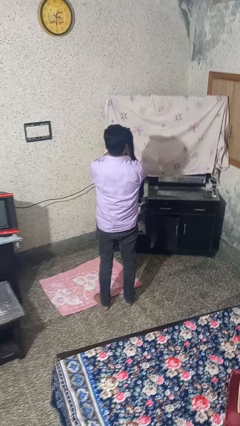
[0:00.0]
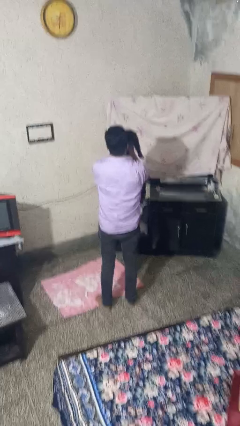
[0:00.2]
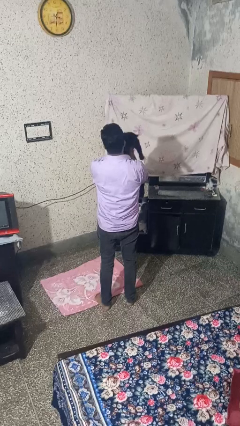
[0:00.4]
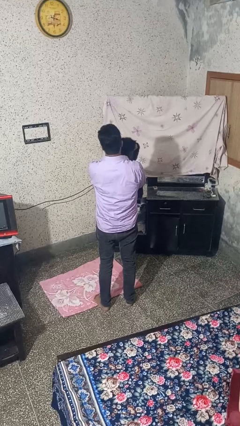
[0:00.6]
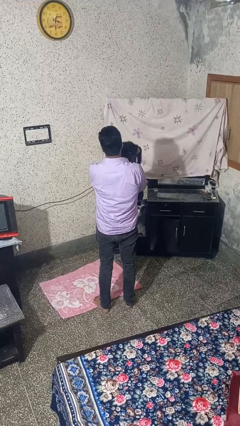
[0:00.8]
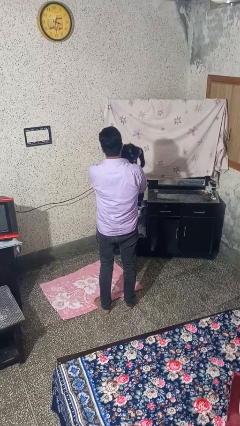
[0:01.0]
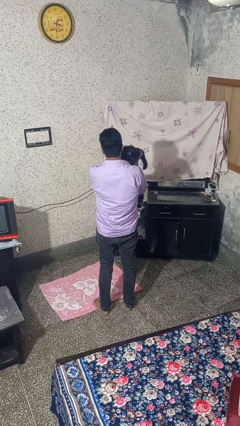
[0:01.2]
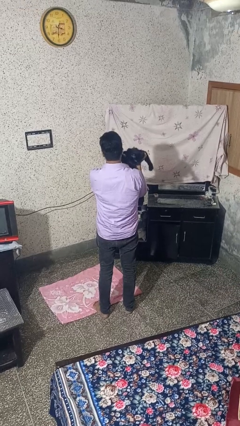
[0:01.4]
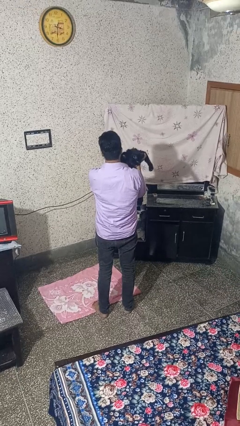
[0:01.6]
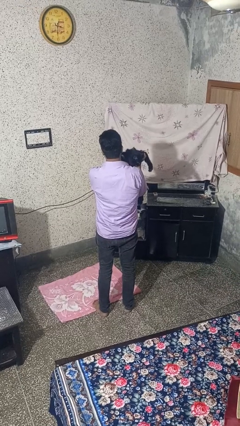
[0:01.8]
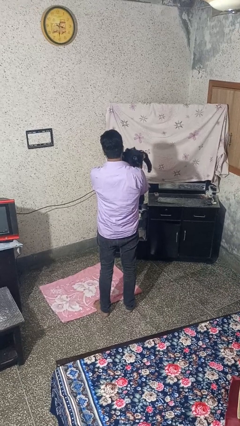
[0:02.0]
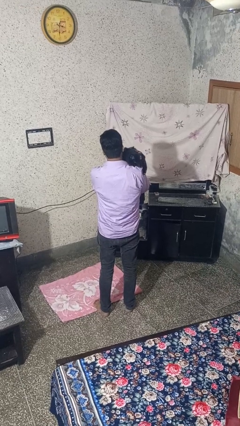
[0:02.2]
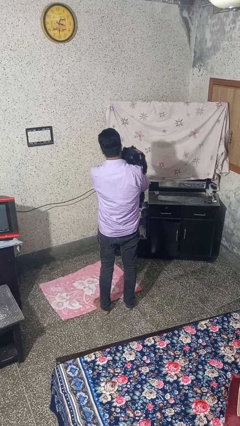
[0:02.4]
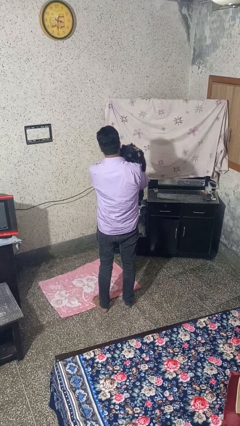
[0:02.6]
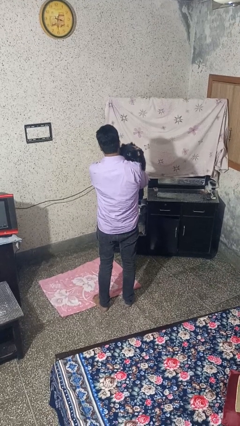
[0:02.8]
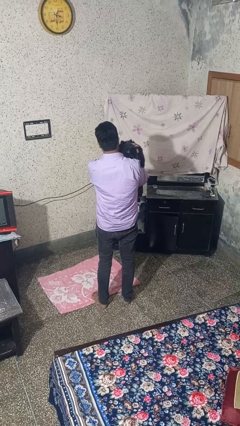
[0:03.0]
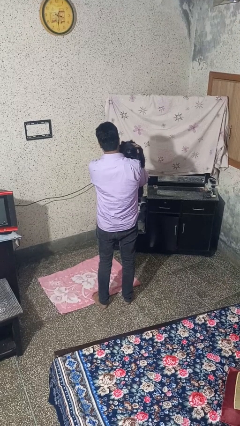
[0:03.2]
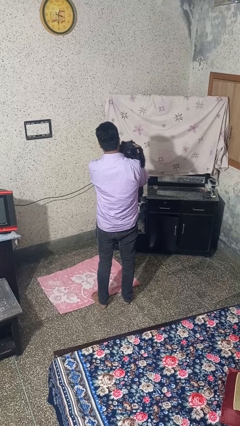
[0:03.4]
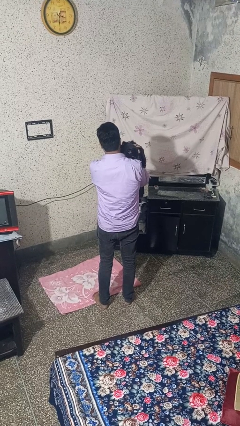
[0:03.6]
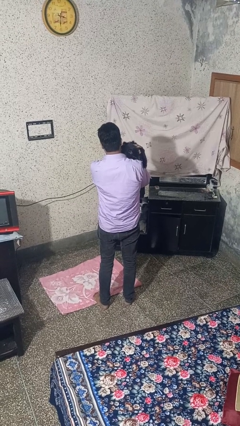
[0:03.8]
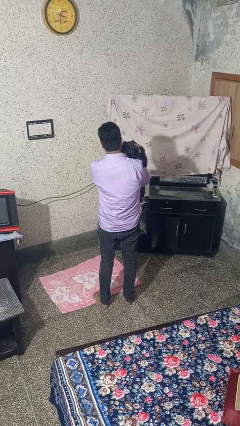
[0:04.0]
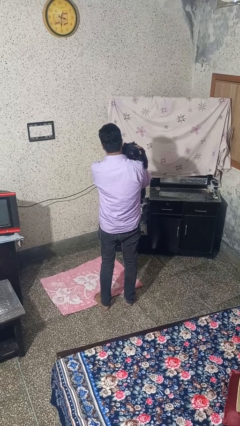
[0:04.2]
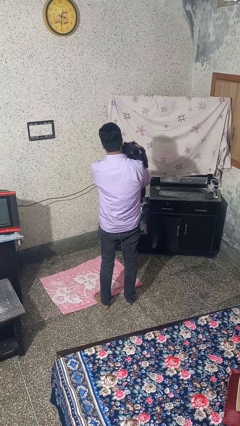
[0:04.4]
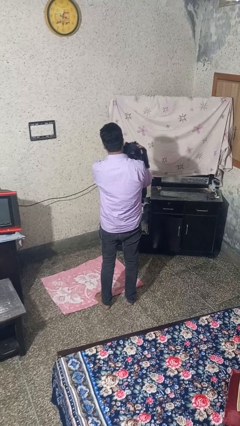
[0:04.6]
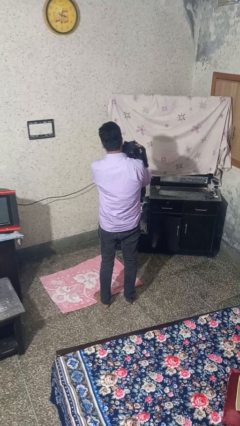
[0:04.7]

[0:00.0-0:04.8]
person hugs cat

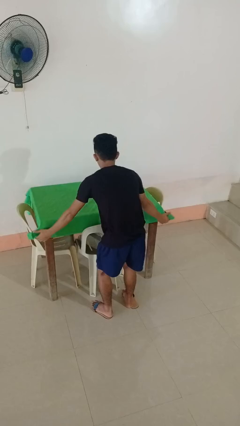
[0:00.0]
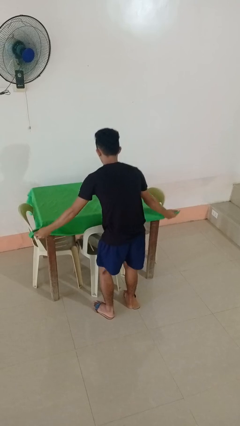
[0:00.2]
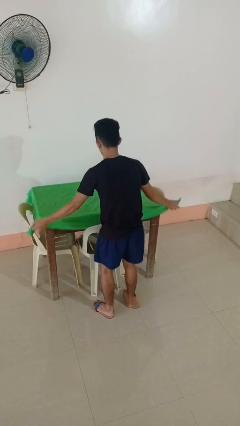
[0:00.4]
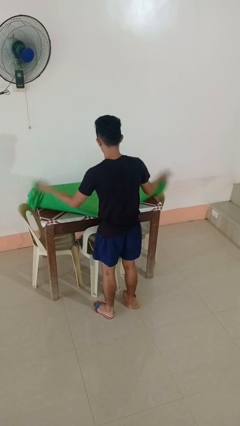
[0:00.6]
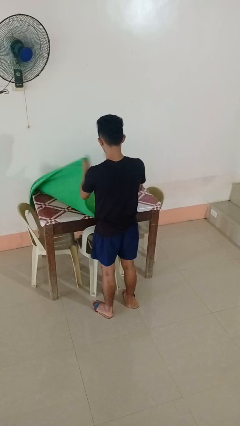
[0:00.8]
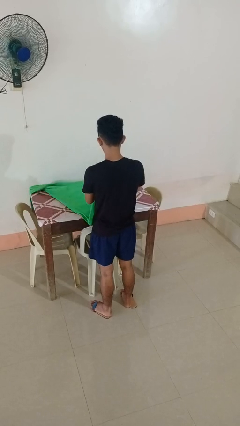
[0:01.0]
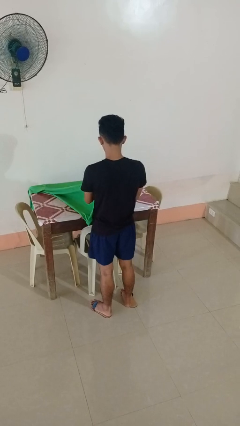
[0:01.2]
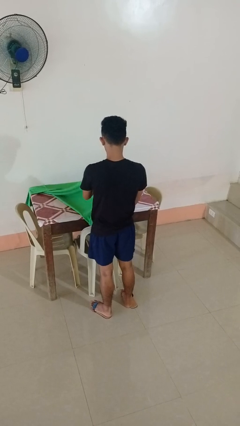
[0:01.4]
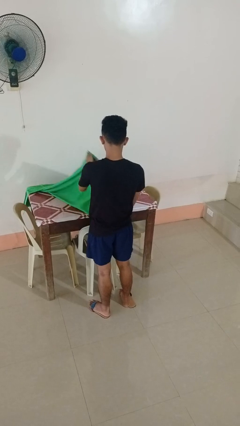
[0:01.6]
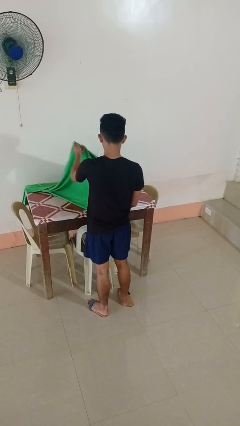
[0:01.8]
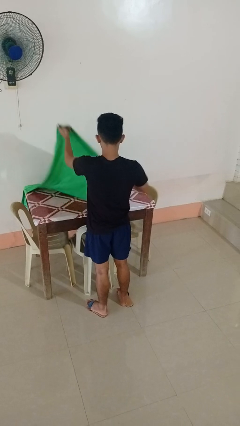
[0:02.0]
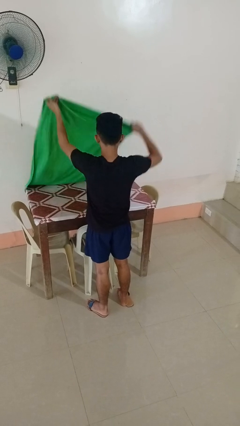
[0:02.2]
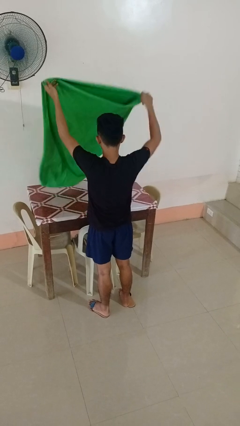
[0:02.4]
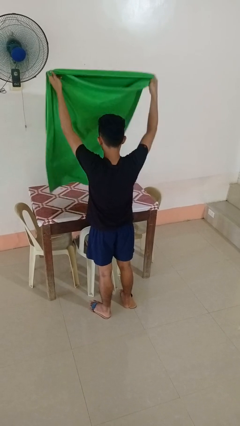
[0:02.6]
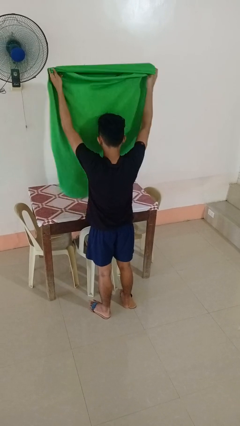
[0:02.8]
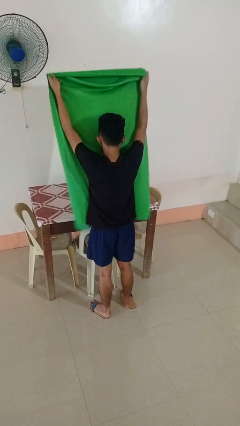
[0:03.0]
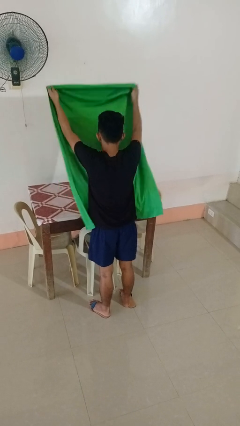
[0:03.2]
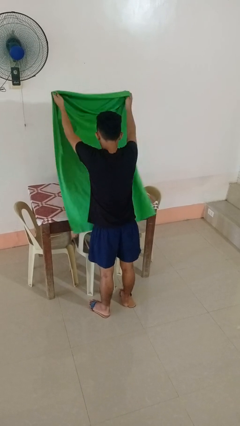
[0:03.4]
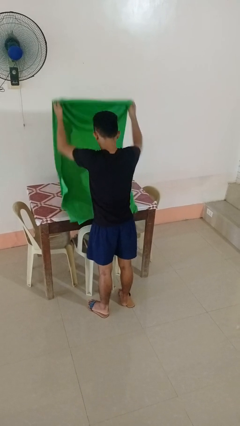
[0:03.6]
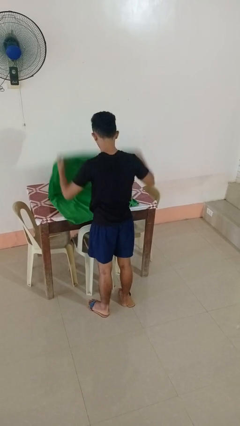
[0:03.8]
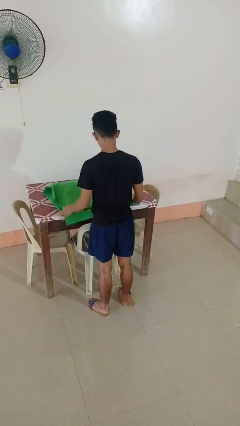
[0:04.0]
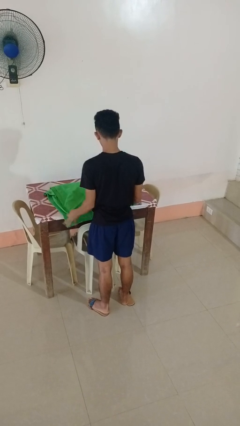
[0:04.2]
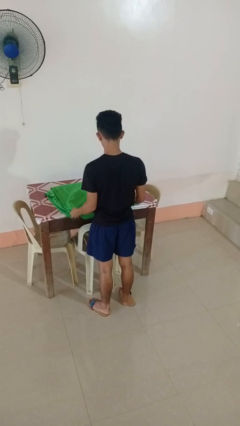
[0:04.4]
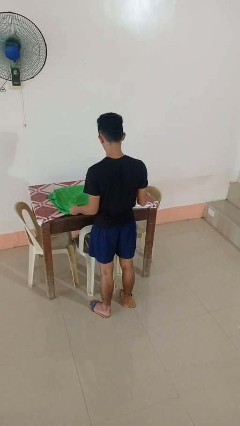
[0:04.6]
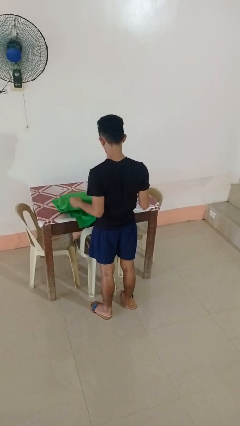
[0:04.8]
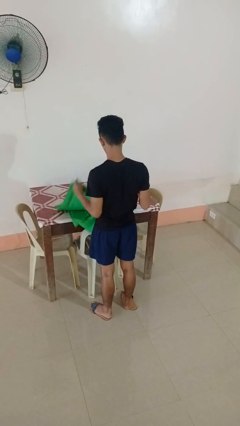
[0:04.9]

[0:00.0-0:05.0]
person folds tablecloth

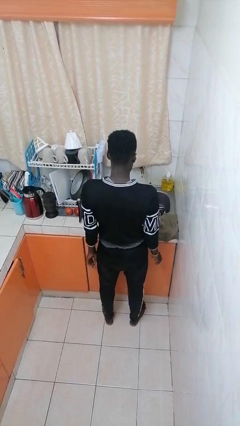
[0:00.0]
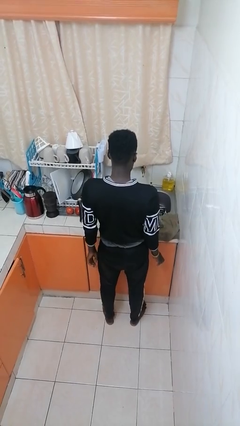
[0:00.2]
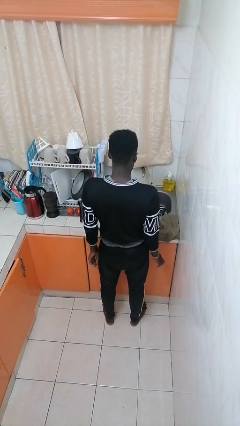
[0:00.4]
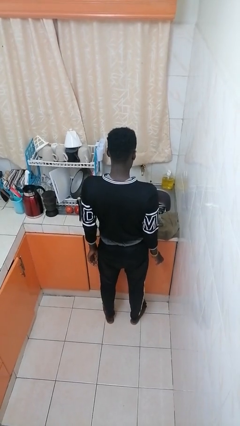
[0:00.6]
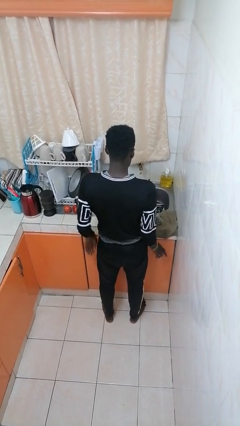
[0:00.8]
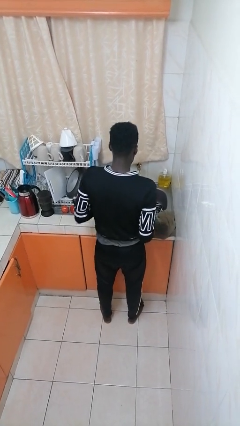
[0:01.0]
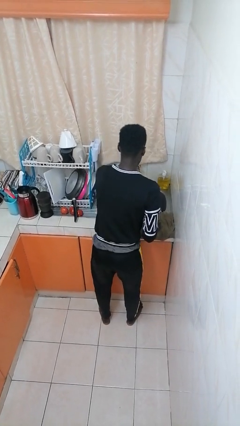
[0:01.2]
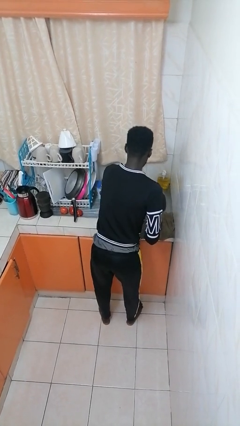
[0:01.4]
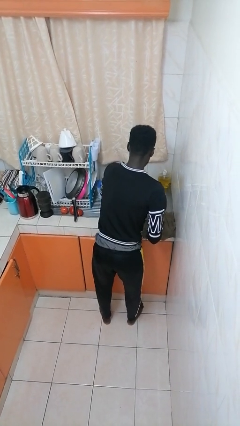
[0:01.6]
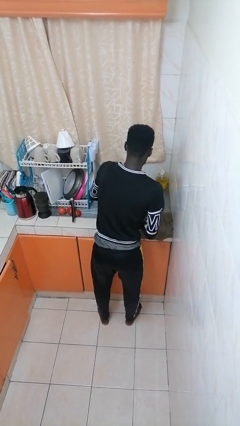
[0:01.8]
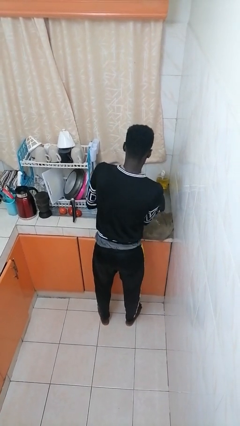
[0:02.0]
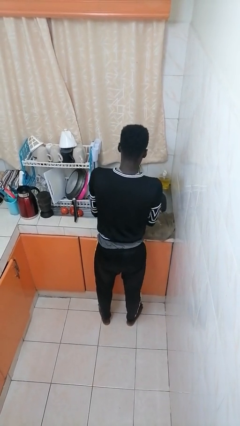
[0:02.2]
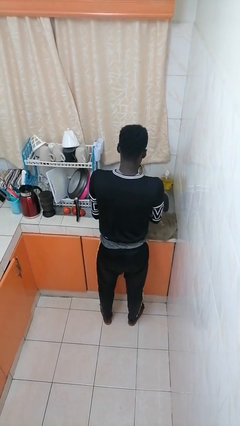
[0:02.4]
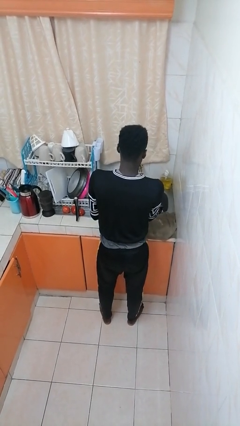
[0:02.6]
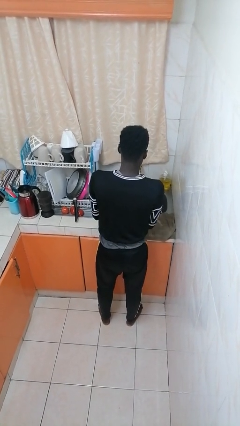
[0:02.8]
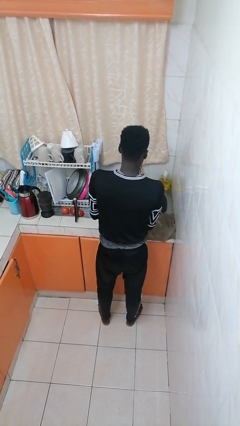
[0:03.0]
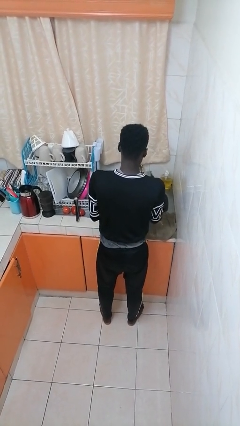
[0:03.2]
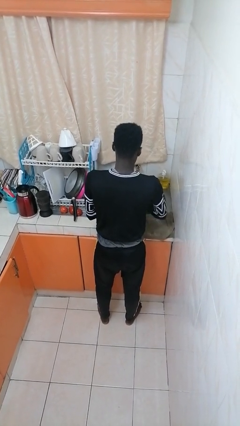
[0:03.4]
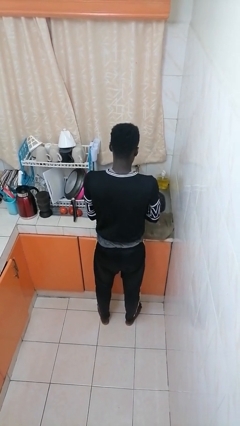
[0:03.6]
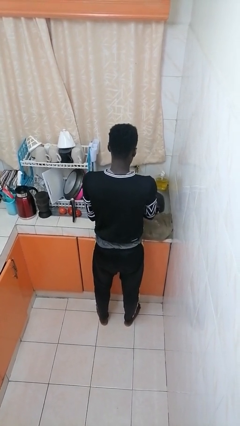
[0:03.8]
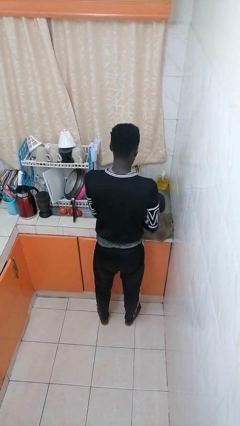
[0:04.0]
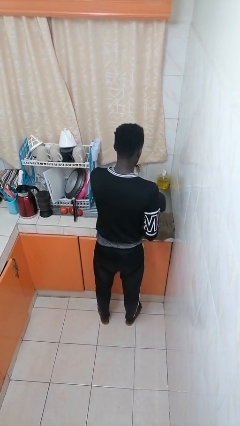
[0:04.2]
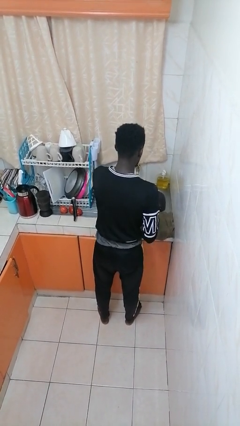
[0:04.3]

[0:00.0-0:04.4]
person washes dish

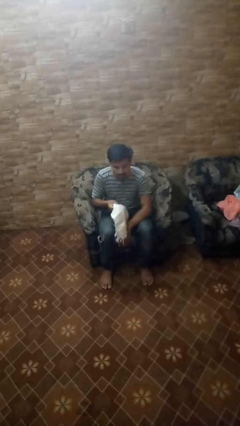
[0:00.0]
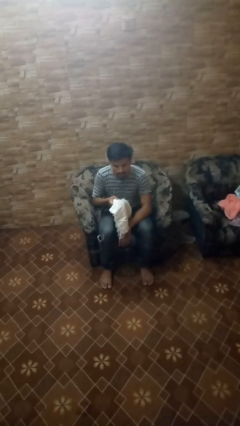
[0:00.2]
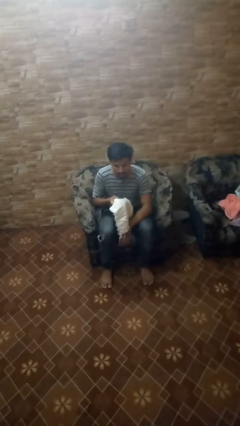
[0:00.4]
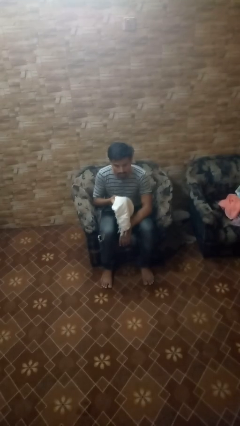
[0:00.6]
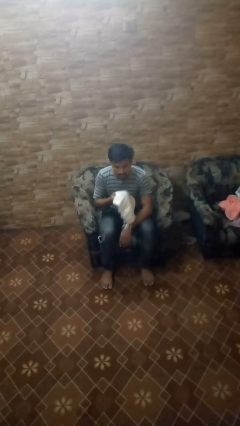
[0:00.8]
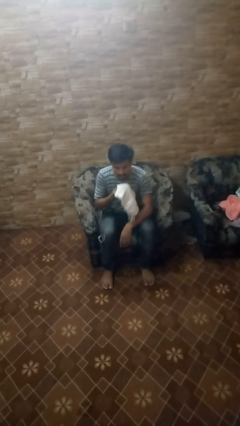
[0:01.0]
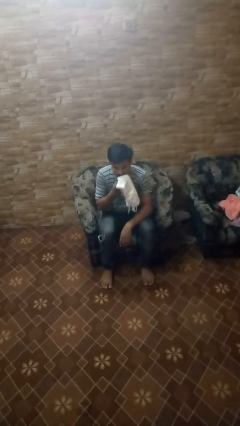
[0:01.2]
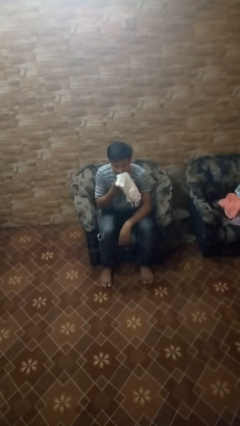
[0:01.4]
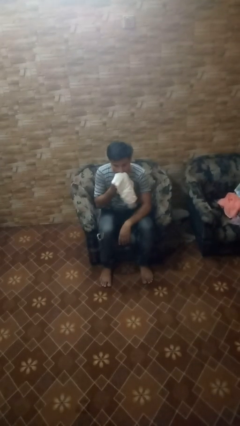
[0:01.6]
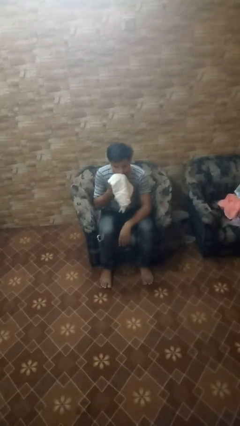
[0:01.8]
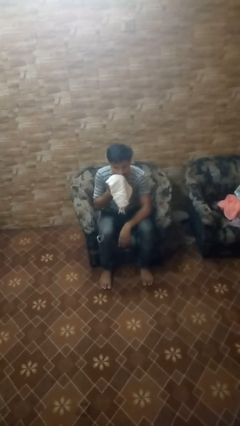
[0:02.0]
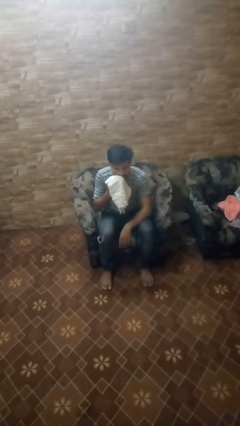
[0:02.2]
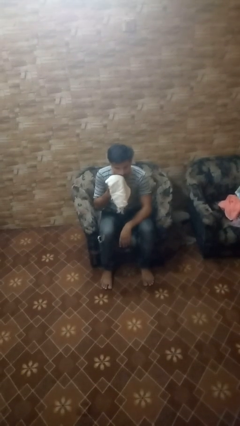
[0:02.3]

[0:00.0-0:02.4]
person wipes mouth with napkin

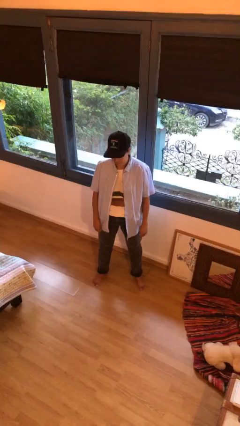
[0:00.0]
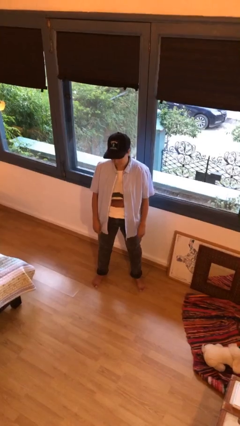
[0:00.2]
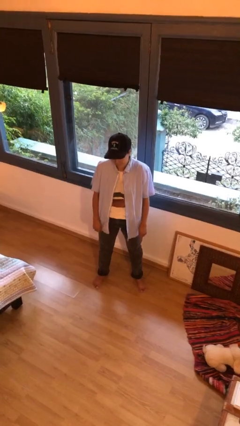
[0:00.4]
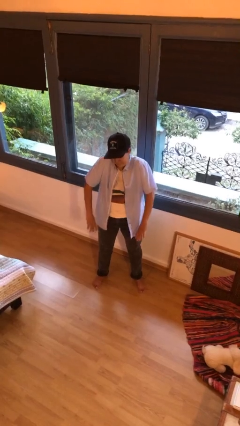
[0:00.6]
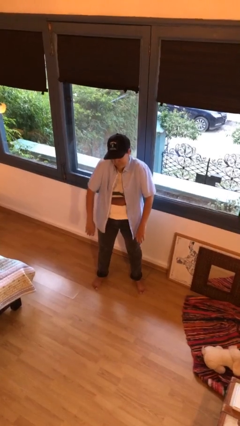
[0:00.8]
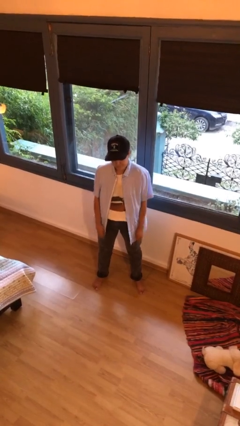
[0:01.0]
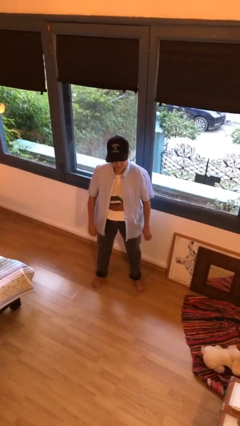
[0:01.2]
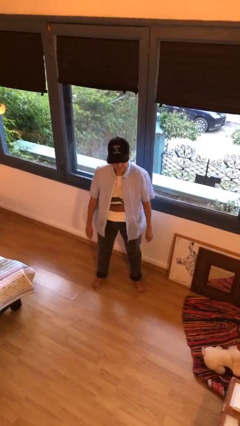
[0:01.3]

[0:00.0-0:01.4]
person shrugs
